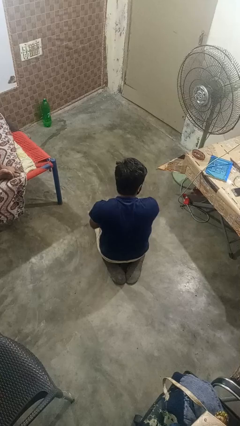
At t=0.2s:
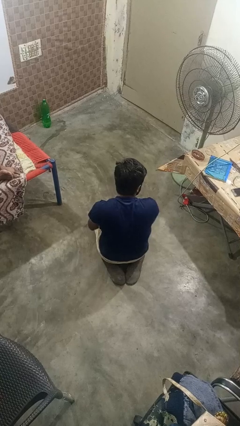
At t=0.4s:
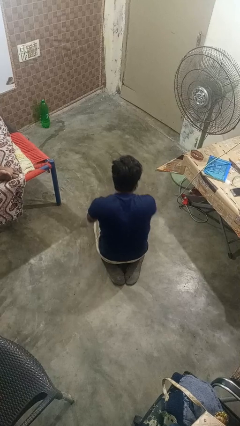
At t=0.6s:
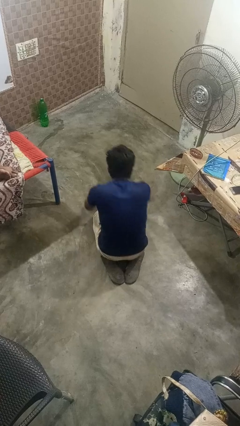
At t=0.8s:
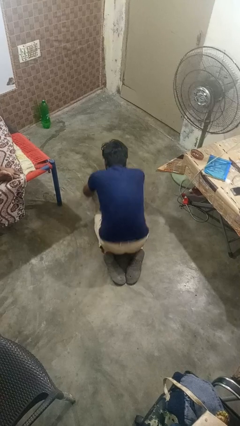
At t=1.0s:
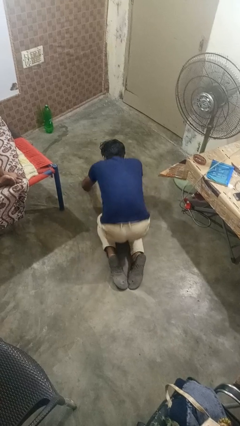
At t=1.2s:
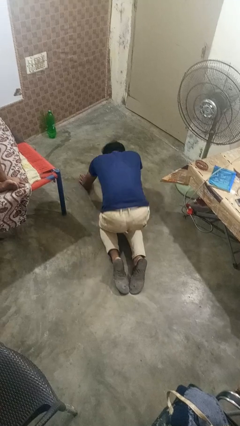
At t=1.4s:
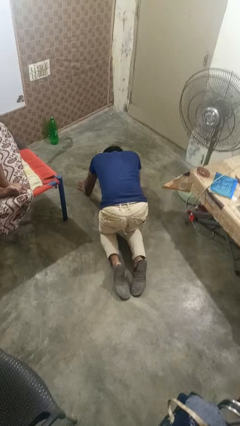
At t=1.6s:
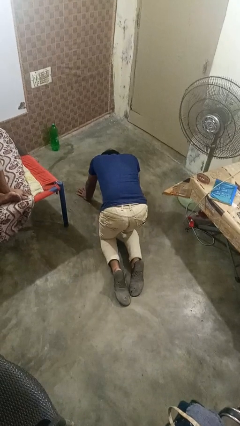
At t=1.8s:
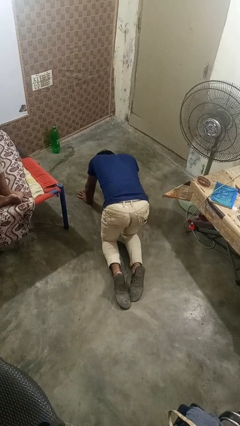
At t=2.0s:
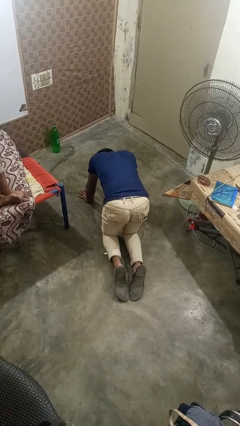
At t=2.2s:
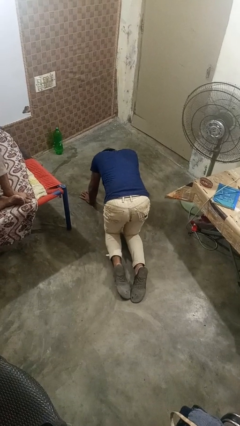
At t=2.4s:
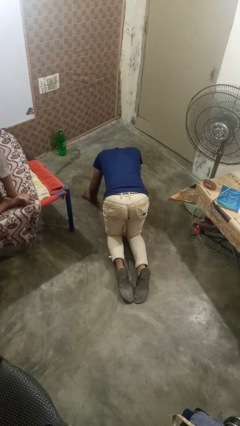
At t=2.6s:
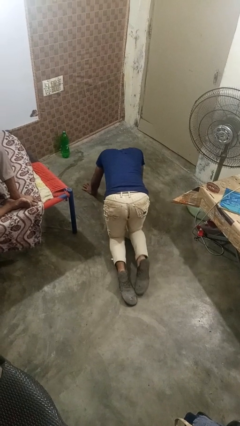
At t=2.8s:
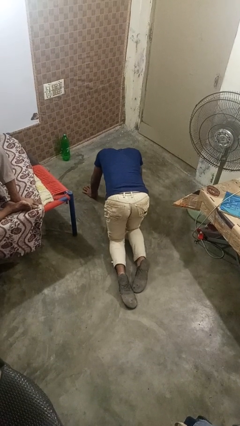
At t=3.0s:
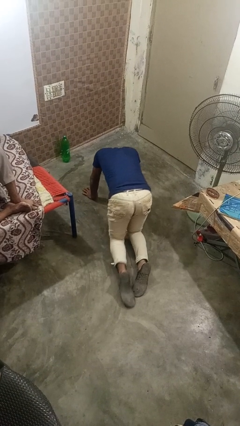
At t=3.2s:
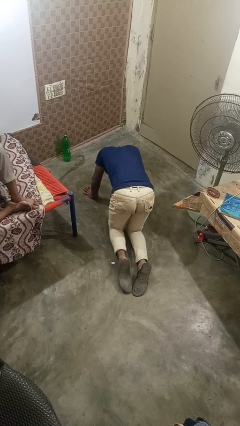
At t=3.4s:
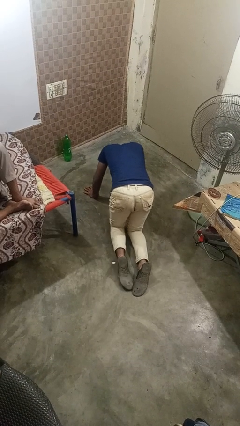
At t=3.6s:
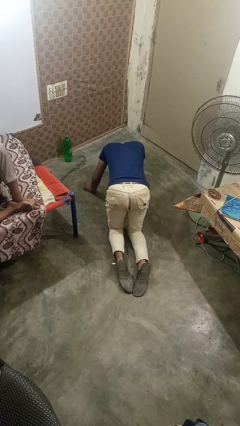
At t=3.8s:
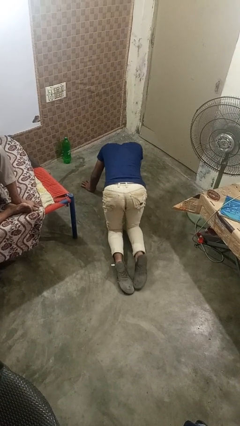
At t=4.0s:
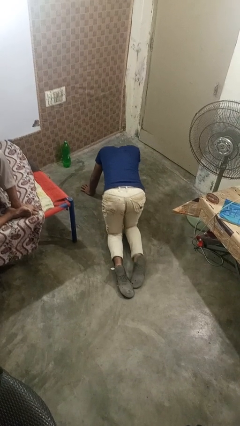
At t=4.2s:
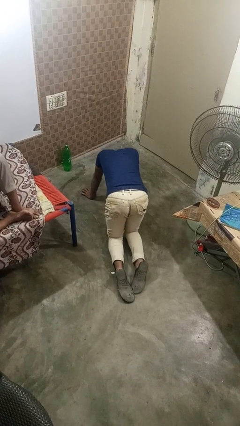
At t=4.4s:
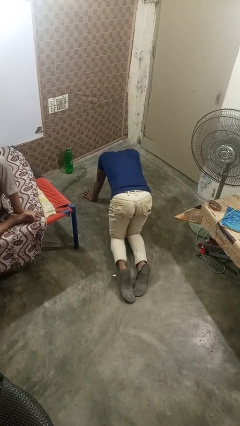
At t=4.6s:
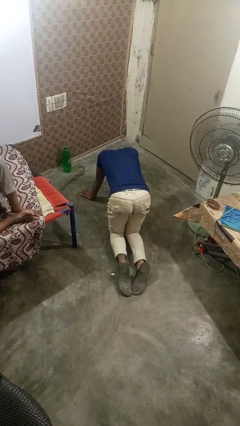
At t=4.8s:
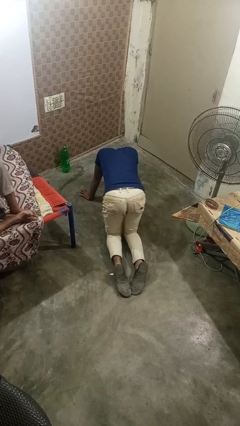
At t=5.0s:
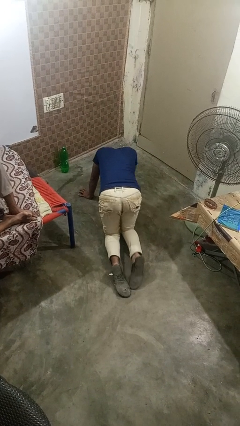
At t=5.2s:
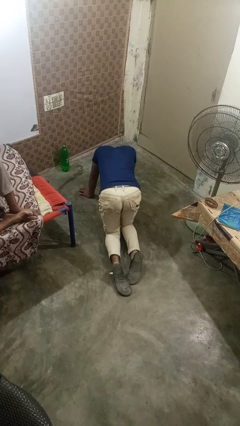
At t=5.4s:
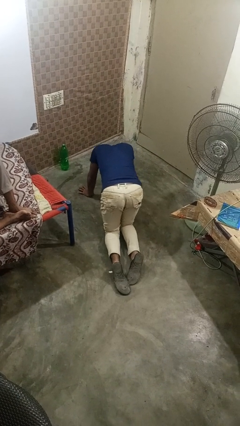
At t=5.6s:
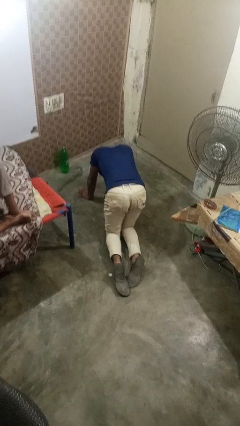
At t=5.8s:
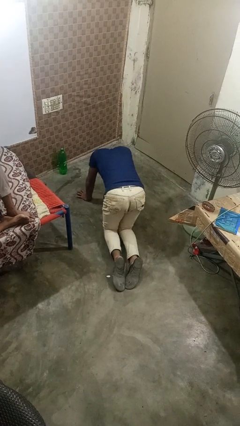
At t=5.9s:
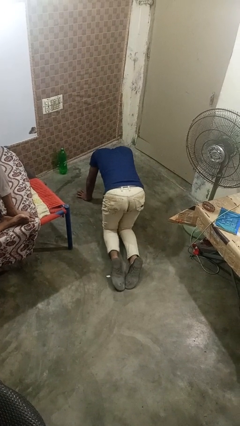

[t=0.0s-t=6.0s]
person crawls

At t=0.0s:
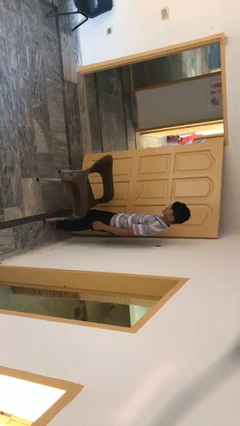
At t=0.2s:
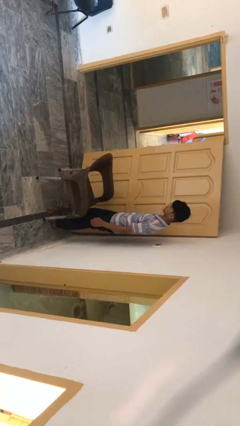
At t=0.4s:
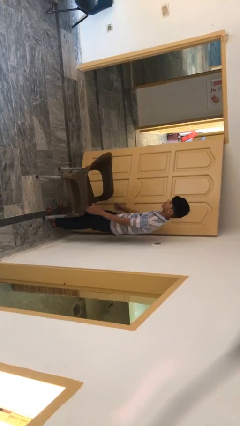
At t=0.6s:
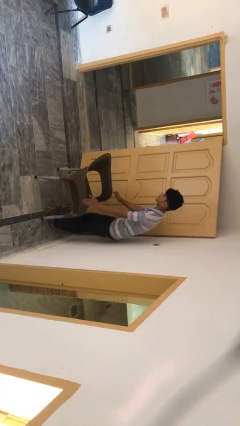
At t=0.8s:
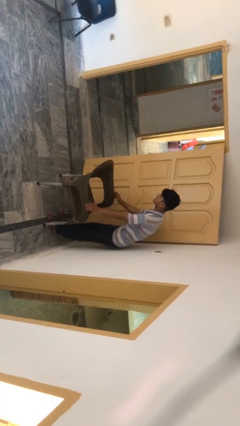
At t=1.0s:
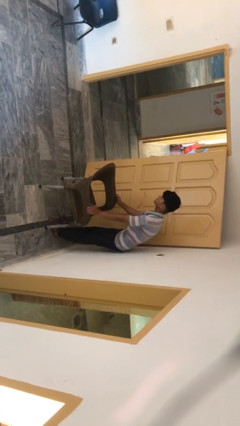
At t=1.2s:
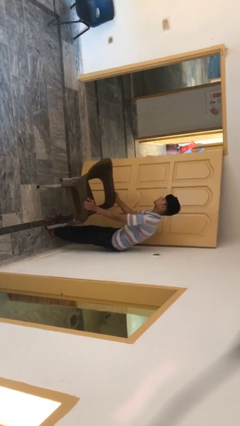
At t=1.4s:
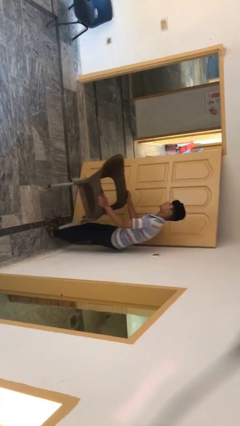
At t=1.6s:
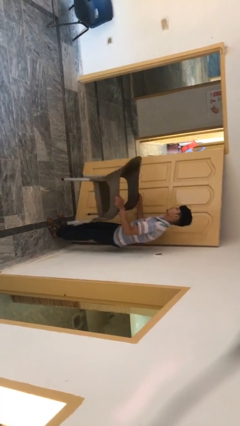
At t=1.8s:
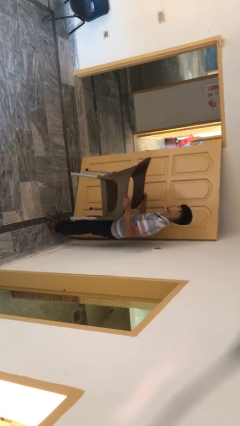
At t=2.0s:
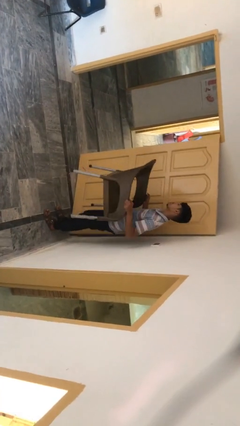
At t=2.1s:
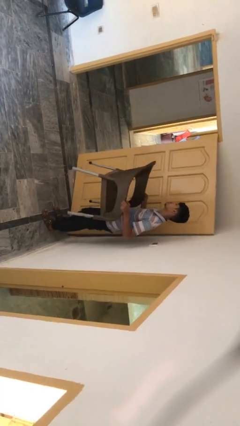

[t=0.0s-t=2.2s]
person picks up object from floor

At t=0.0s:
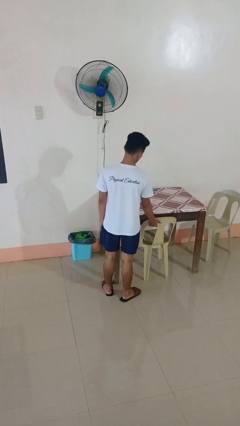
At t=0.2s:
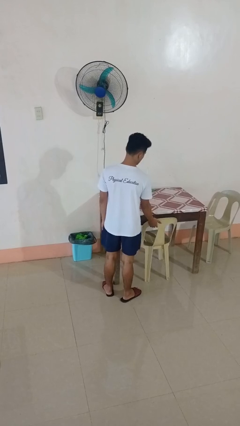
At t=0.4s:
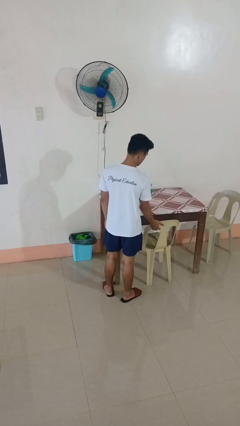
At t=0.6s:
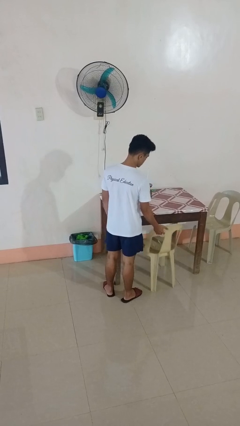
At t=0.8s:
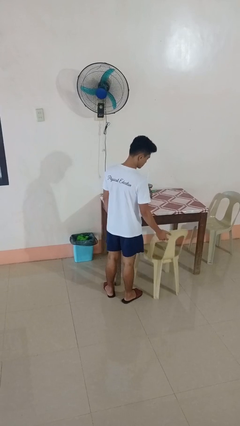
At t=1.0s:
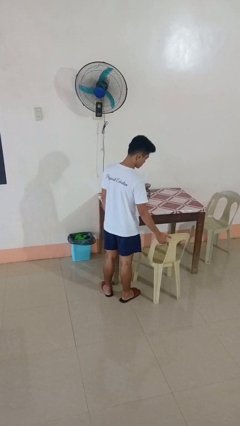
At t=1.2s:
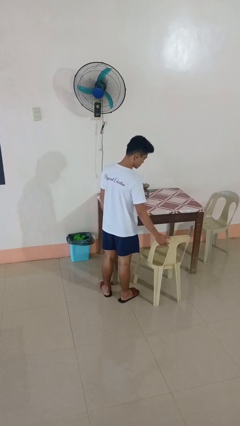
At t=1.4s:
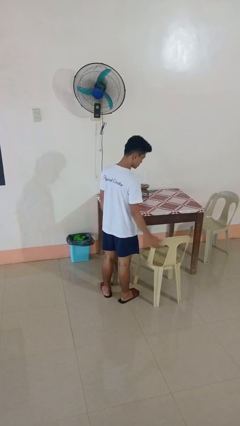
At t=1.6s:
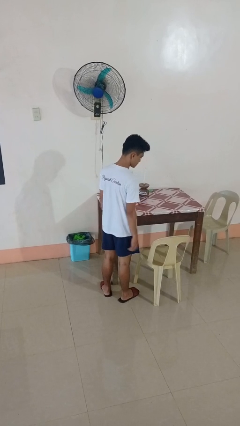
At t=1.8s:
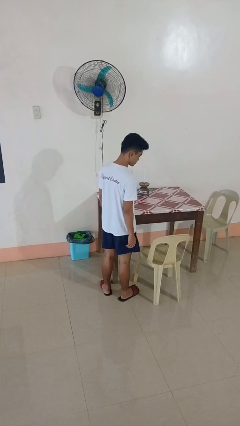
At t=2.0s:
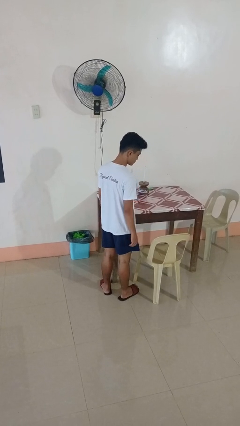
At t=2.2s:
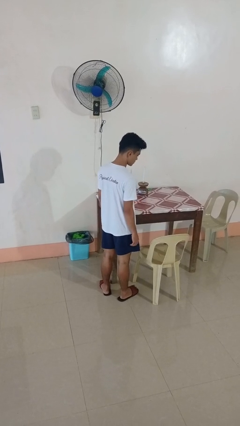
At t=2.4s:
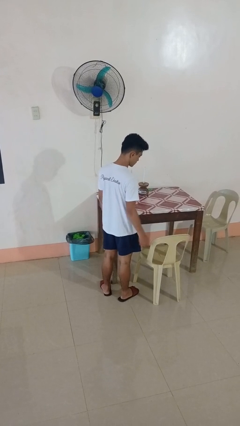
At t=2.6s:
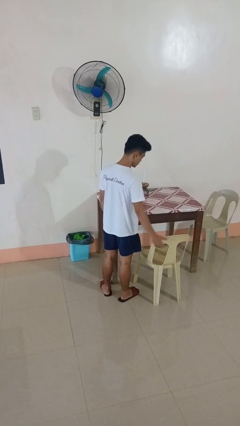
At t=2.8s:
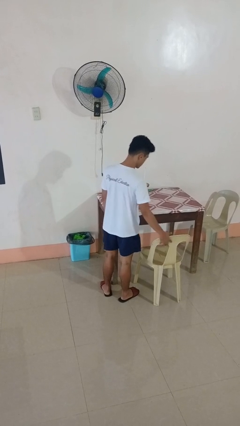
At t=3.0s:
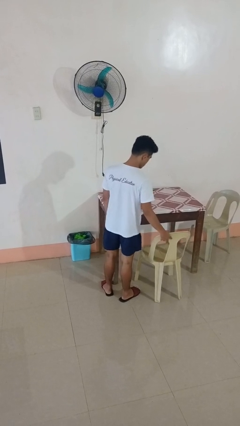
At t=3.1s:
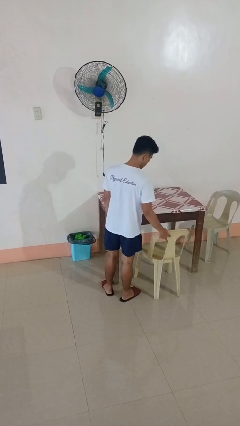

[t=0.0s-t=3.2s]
person pulls out chair

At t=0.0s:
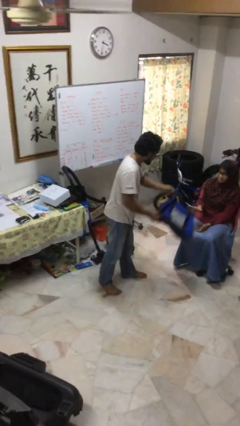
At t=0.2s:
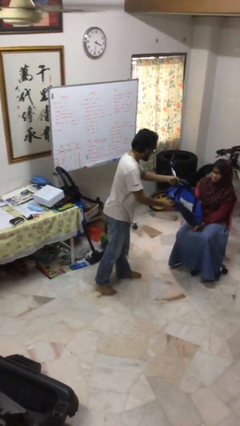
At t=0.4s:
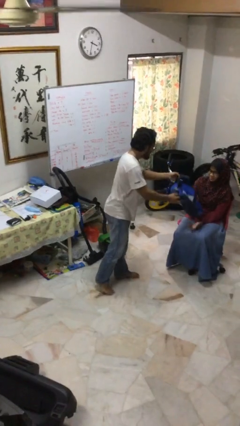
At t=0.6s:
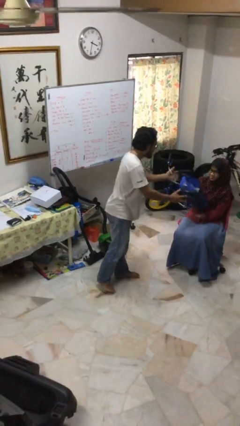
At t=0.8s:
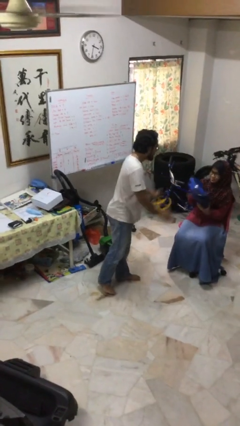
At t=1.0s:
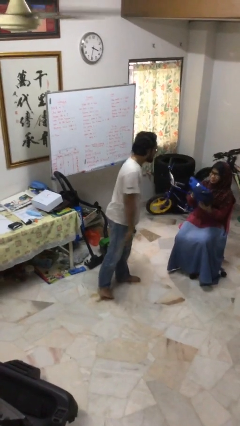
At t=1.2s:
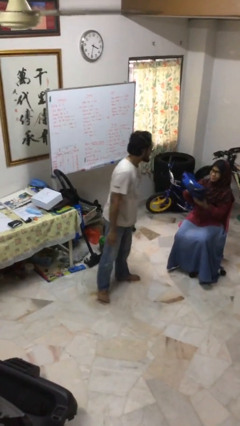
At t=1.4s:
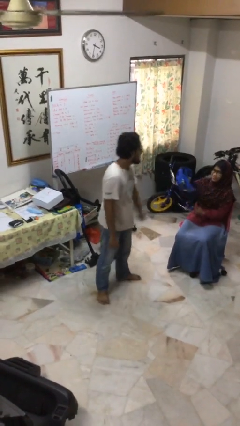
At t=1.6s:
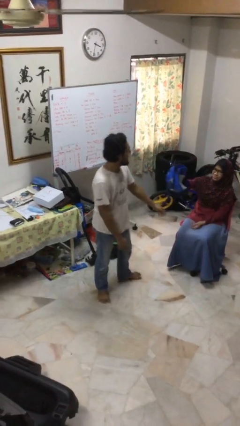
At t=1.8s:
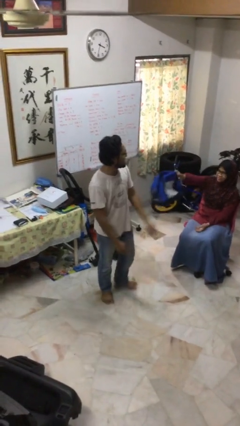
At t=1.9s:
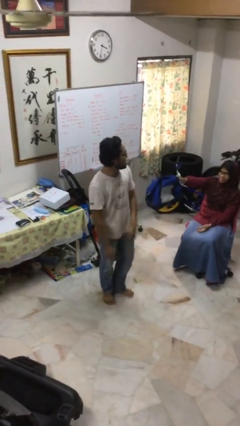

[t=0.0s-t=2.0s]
person transfers object to person

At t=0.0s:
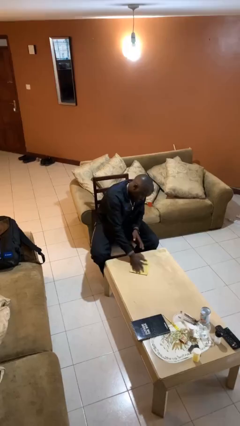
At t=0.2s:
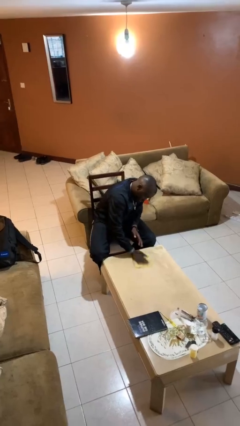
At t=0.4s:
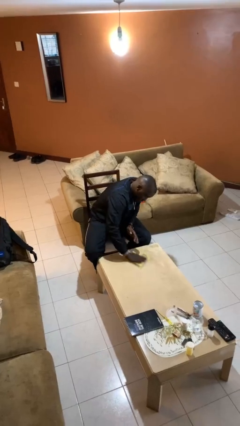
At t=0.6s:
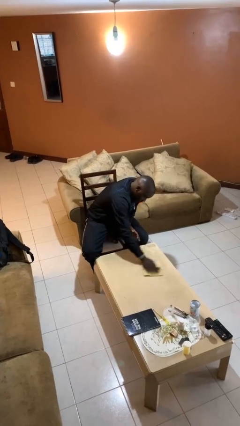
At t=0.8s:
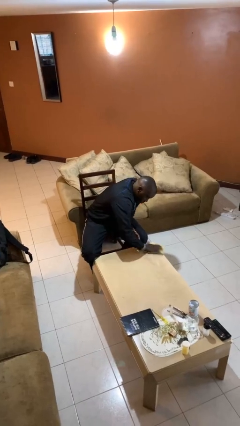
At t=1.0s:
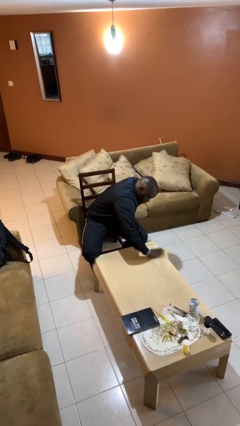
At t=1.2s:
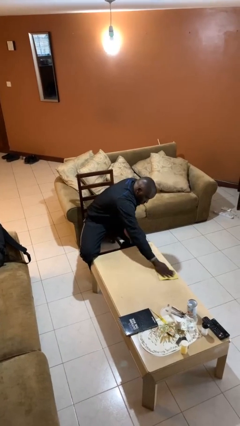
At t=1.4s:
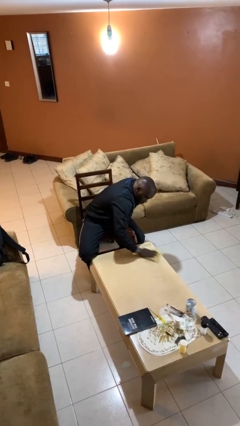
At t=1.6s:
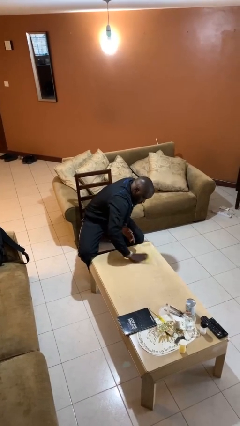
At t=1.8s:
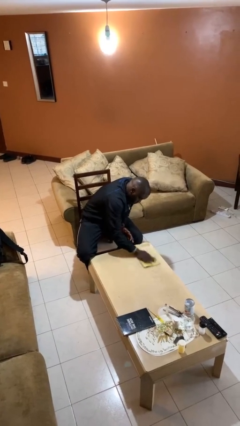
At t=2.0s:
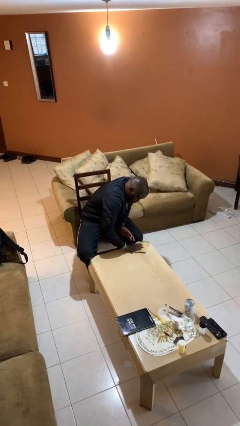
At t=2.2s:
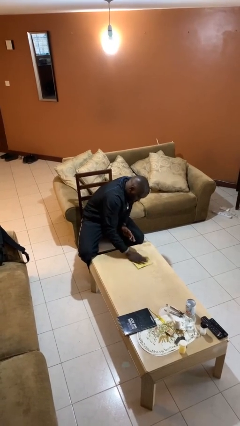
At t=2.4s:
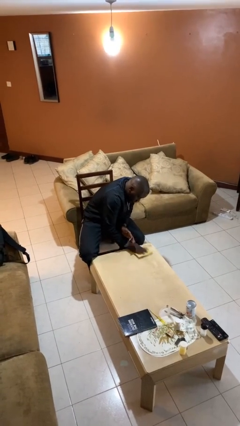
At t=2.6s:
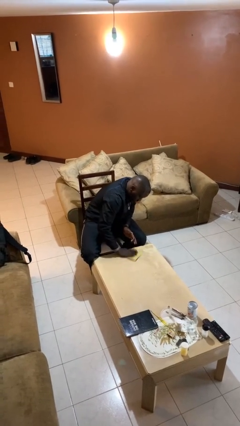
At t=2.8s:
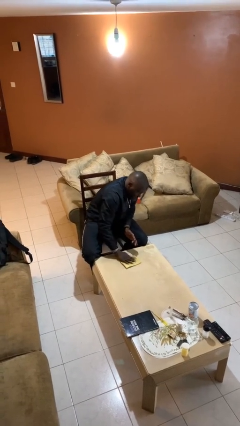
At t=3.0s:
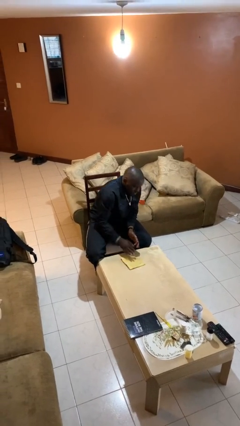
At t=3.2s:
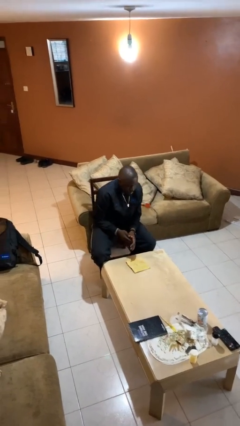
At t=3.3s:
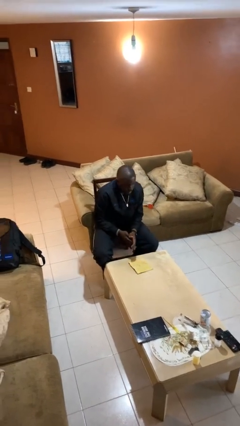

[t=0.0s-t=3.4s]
person cleans table with rag

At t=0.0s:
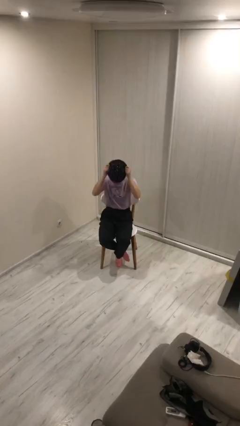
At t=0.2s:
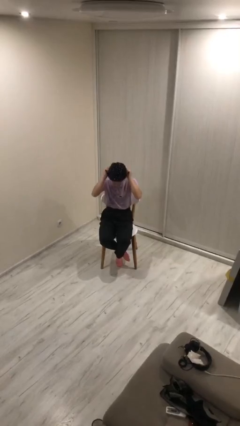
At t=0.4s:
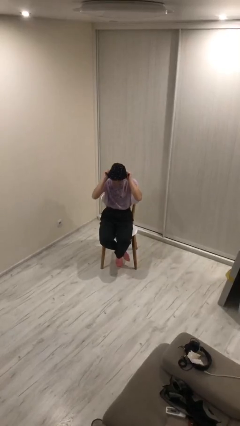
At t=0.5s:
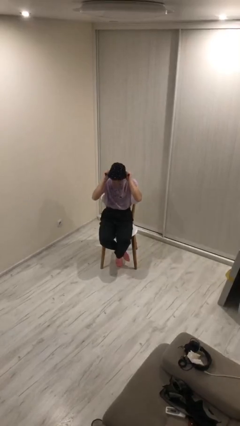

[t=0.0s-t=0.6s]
person puts on hat
